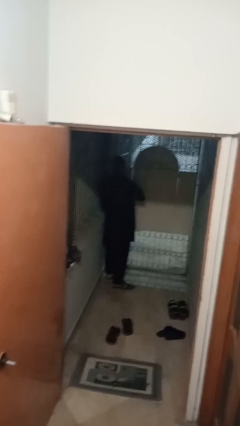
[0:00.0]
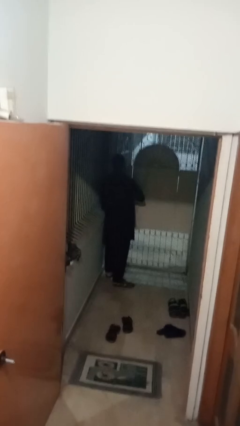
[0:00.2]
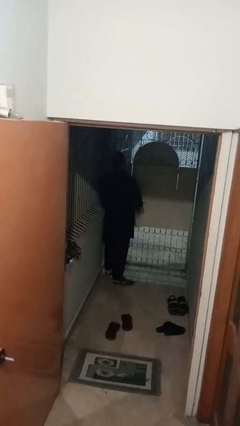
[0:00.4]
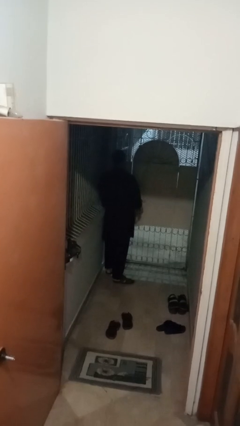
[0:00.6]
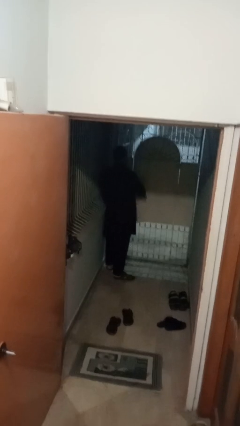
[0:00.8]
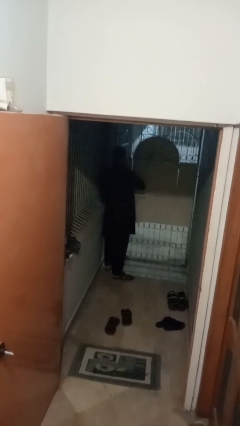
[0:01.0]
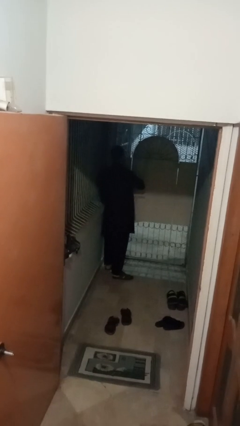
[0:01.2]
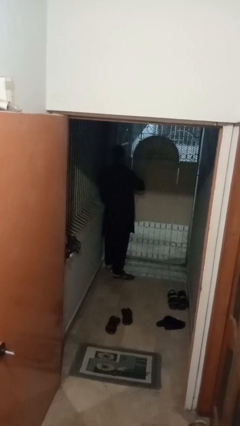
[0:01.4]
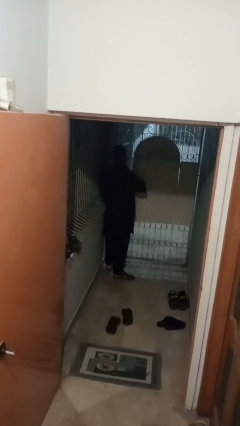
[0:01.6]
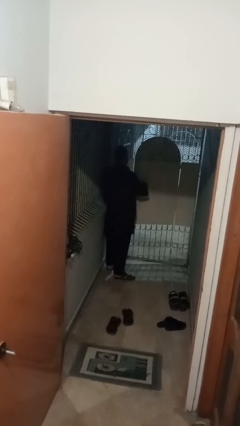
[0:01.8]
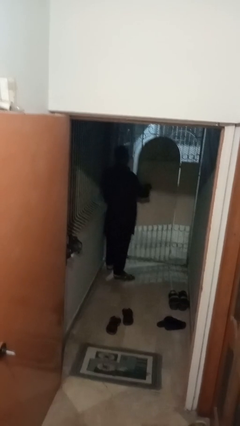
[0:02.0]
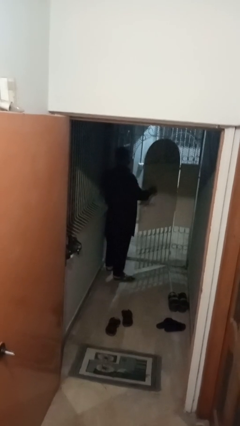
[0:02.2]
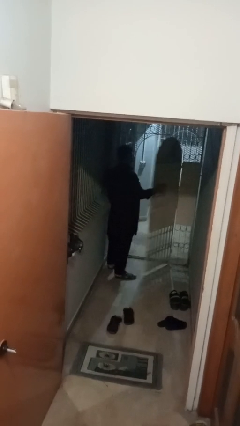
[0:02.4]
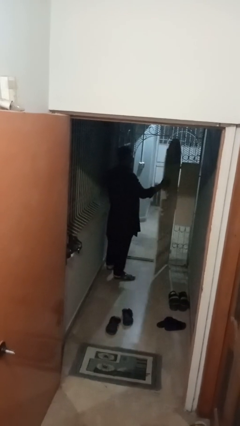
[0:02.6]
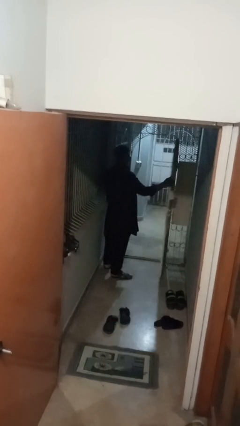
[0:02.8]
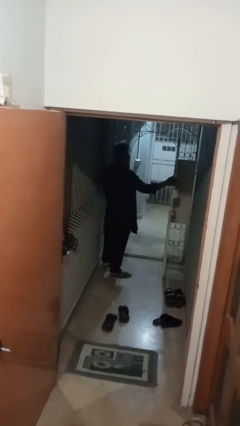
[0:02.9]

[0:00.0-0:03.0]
person opens gate

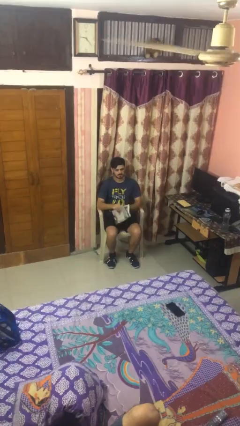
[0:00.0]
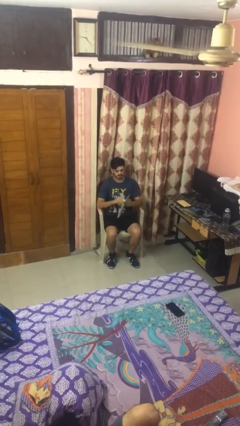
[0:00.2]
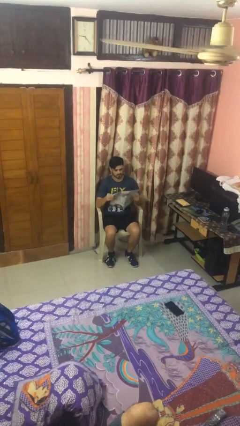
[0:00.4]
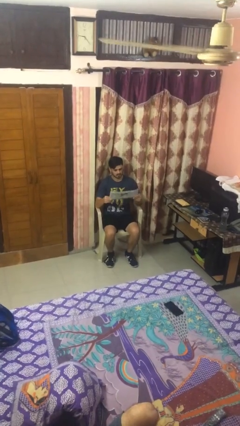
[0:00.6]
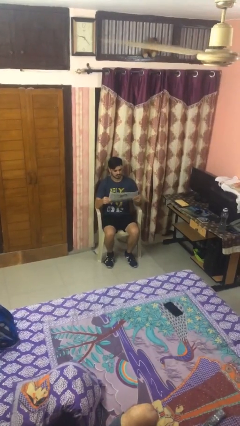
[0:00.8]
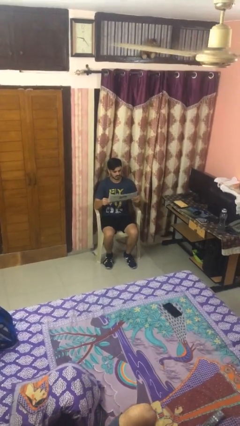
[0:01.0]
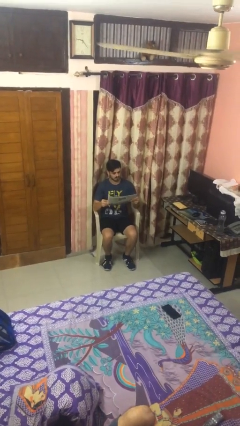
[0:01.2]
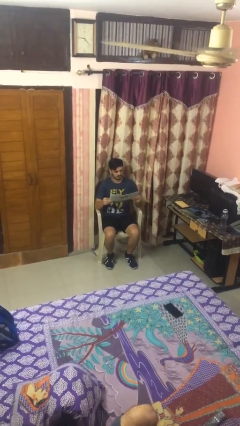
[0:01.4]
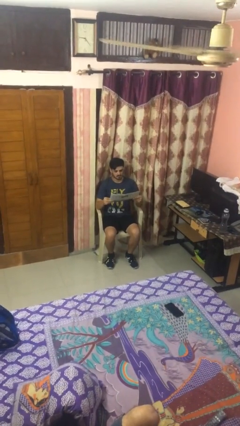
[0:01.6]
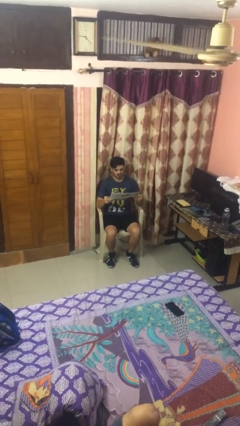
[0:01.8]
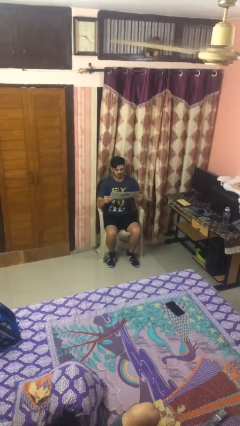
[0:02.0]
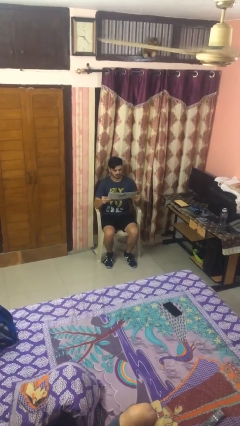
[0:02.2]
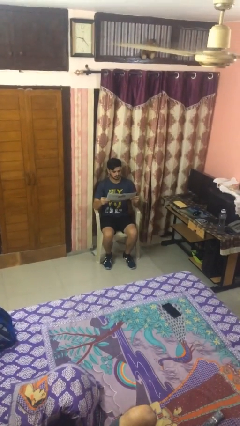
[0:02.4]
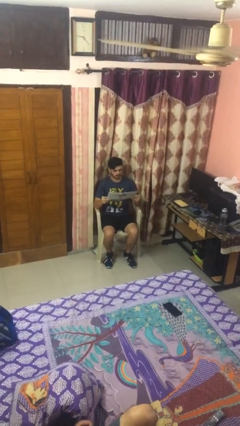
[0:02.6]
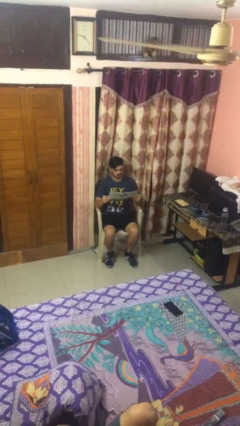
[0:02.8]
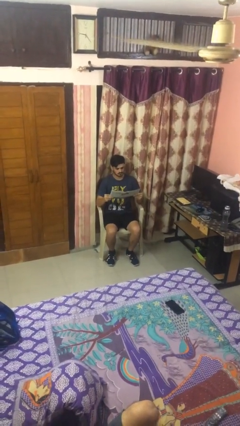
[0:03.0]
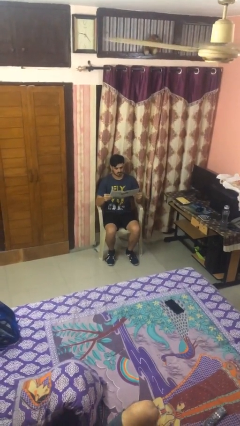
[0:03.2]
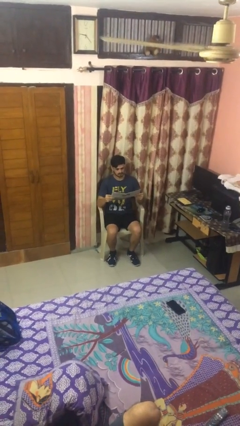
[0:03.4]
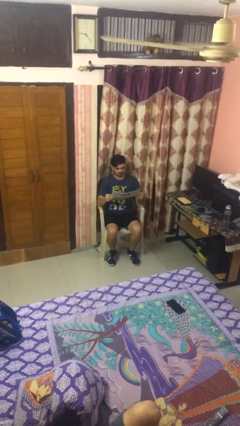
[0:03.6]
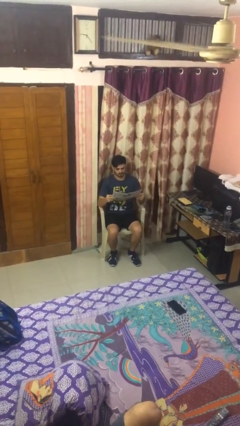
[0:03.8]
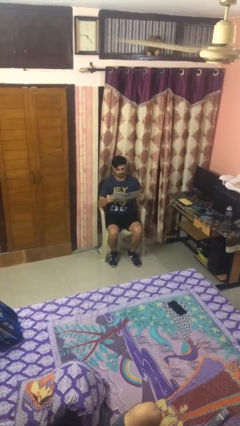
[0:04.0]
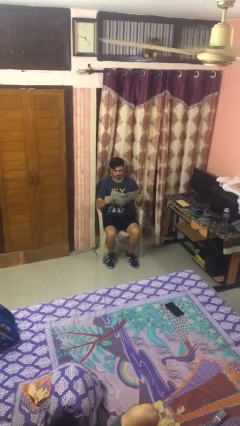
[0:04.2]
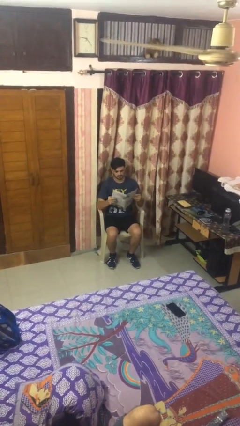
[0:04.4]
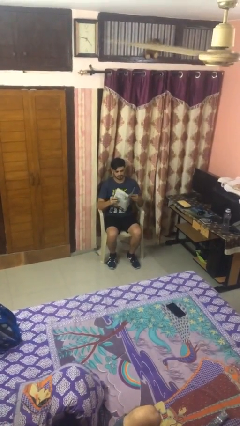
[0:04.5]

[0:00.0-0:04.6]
person reads newspaper

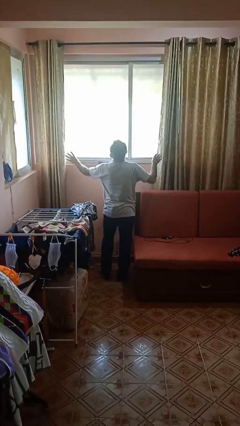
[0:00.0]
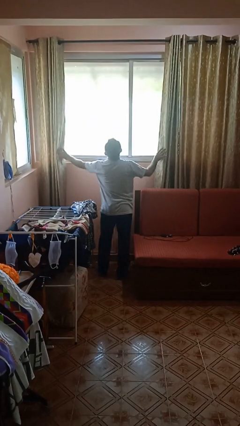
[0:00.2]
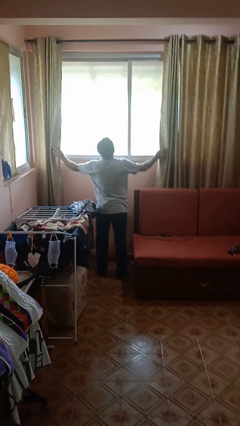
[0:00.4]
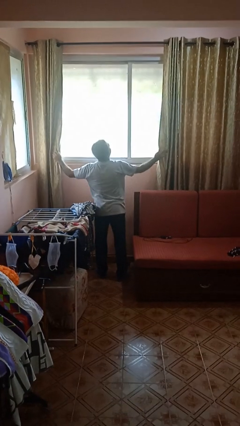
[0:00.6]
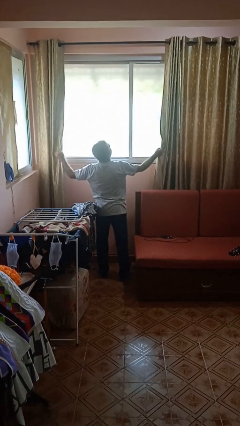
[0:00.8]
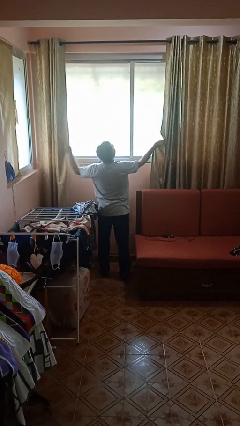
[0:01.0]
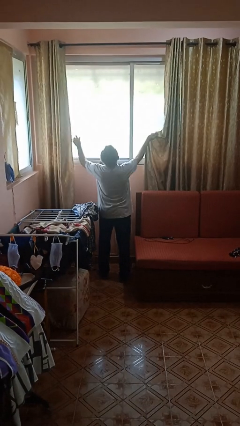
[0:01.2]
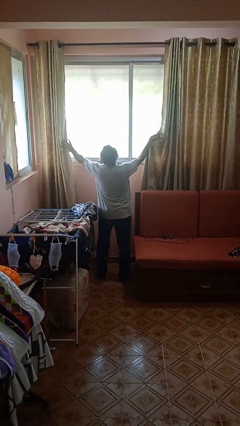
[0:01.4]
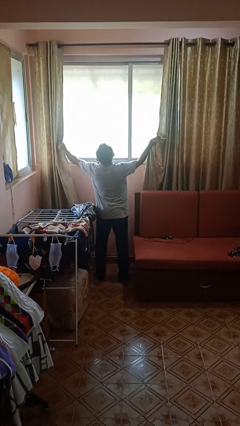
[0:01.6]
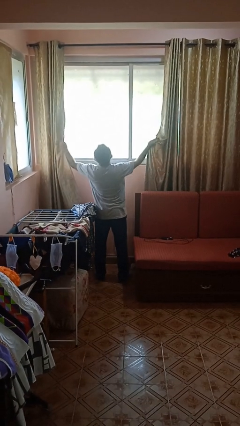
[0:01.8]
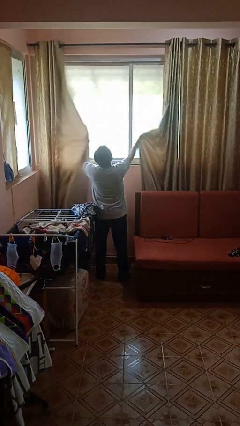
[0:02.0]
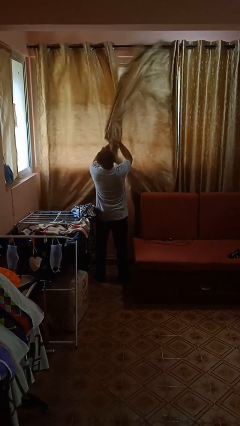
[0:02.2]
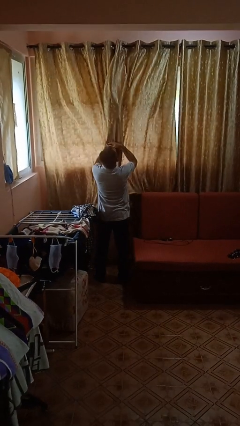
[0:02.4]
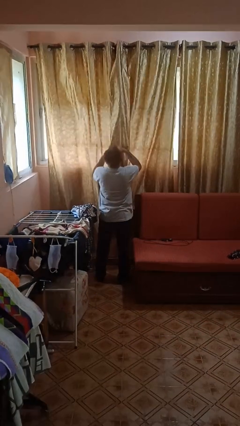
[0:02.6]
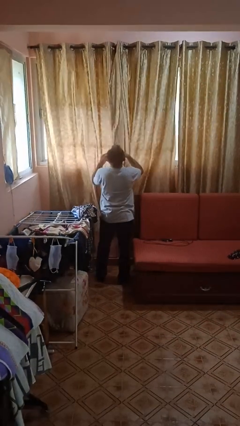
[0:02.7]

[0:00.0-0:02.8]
person closes curtains

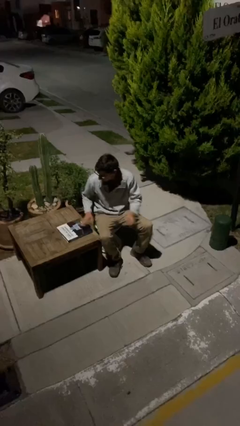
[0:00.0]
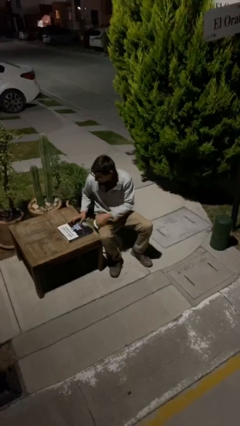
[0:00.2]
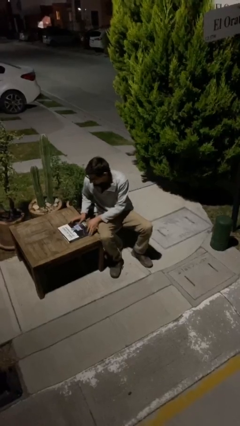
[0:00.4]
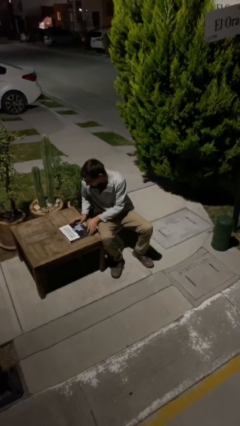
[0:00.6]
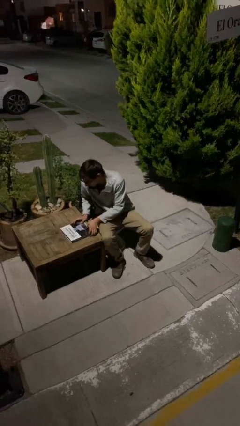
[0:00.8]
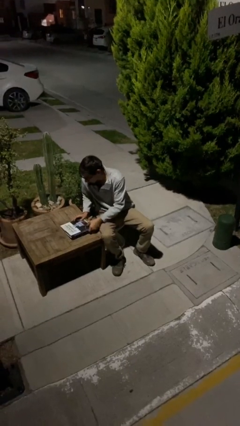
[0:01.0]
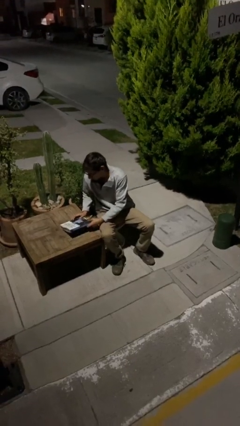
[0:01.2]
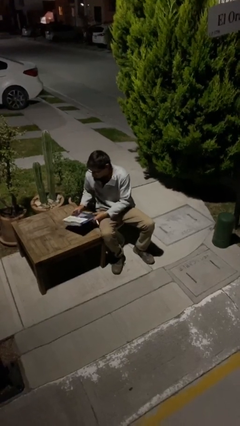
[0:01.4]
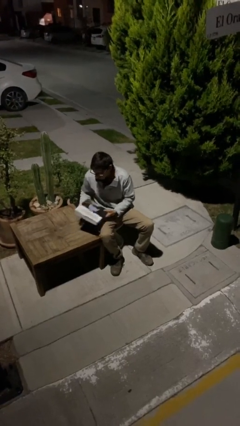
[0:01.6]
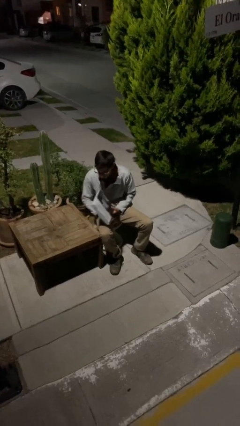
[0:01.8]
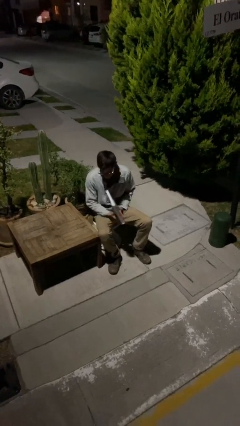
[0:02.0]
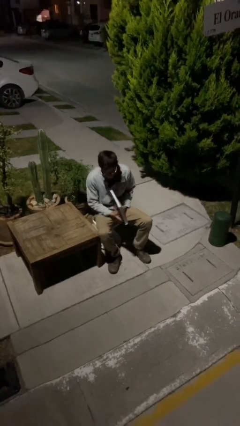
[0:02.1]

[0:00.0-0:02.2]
person picks up object from table

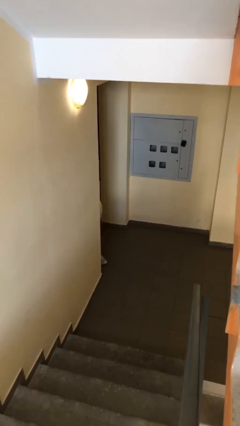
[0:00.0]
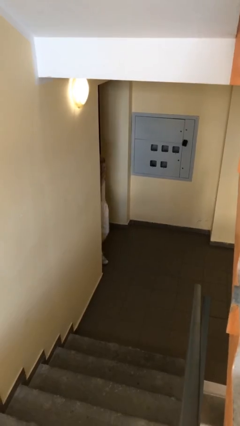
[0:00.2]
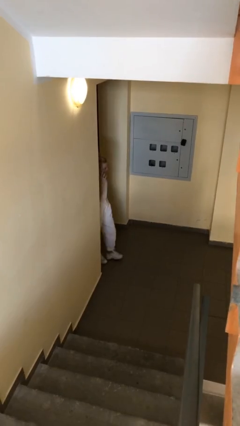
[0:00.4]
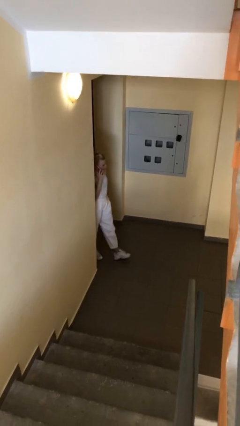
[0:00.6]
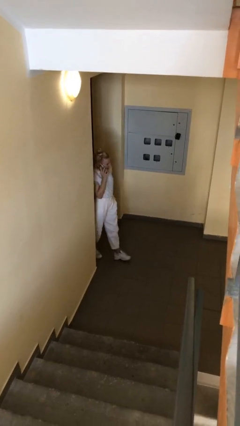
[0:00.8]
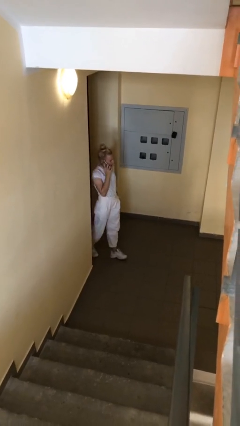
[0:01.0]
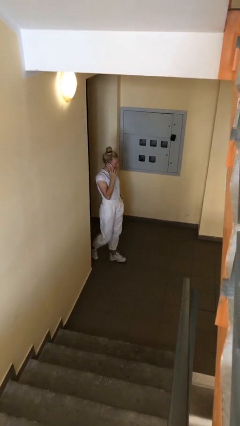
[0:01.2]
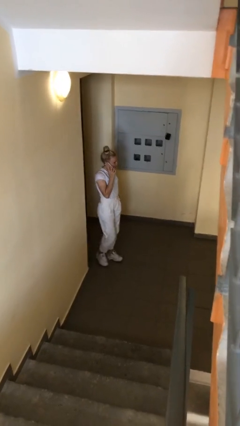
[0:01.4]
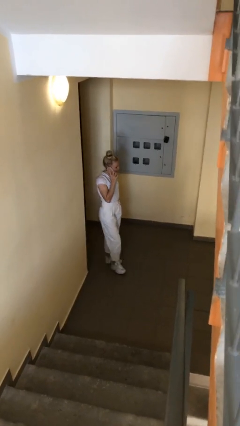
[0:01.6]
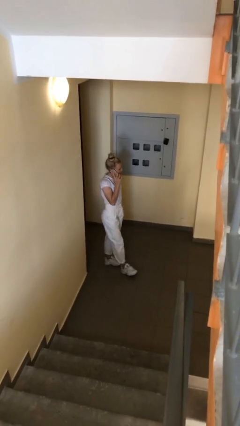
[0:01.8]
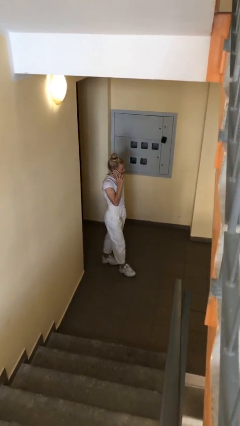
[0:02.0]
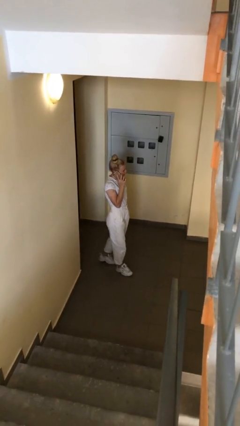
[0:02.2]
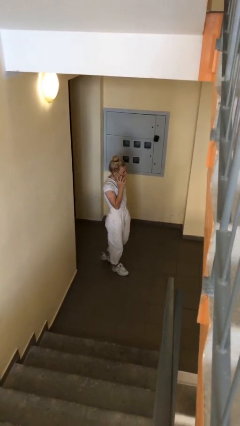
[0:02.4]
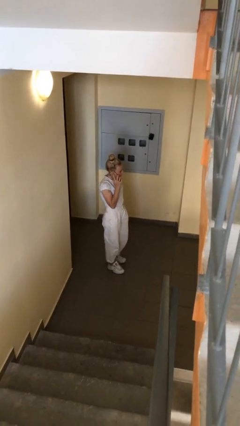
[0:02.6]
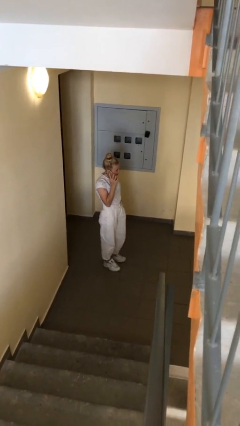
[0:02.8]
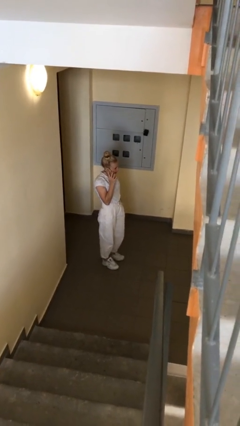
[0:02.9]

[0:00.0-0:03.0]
person enters scene through structure

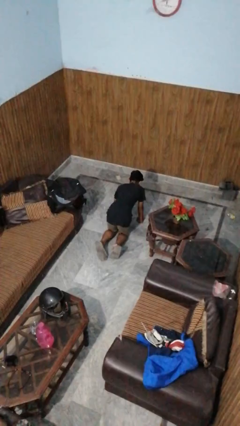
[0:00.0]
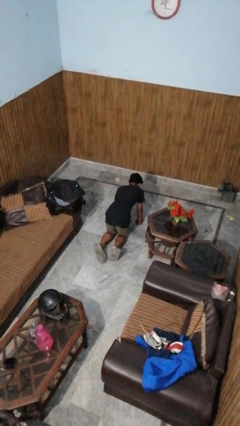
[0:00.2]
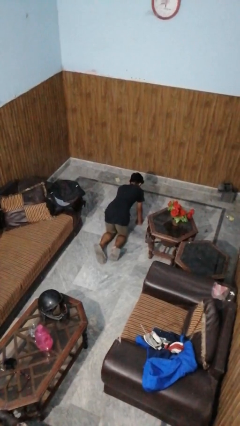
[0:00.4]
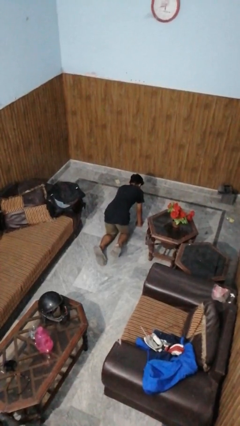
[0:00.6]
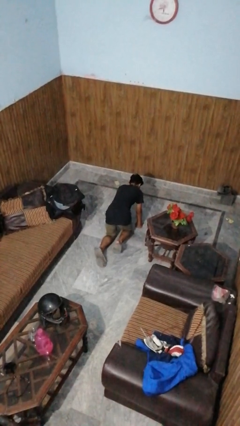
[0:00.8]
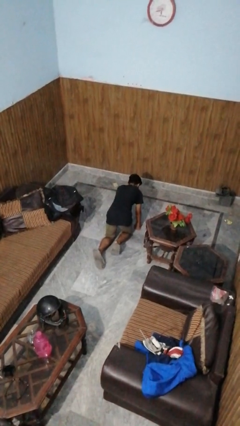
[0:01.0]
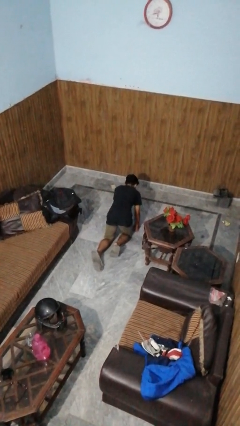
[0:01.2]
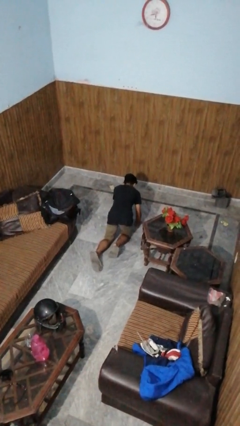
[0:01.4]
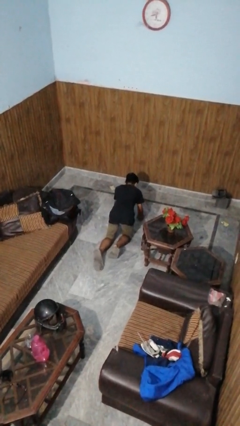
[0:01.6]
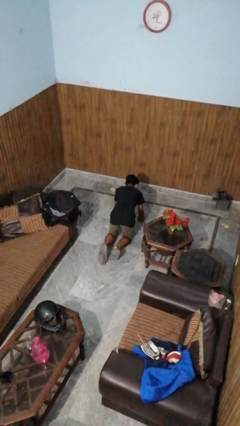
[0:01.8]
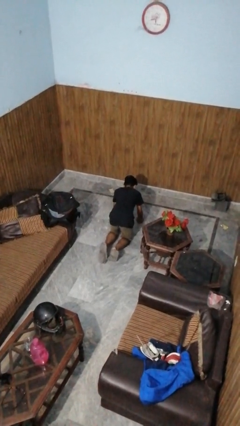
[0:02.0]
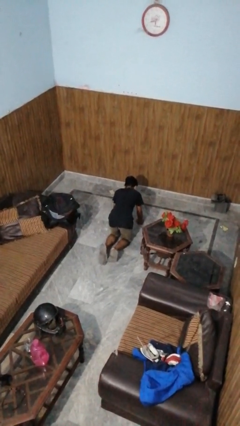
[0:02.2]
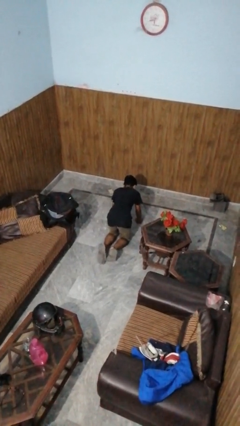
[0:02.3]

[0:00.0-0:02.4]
person crawls
